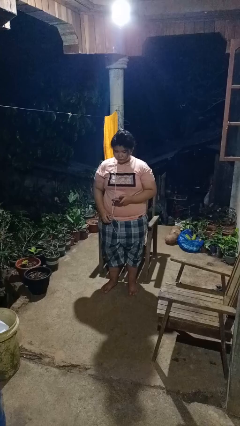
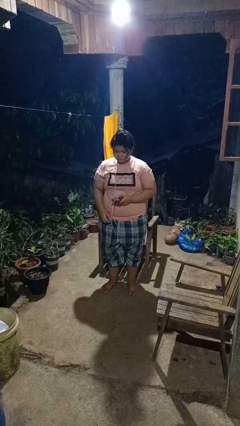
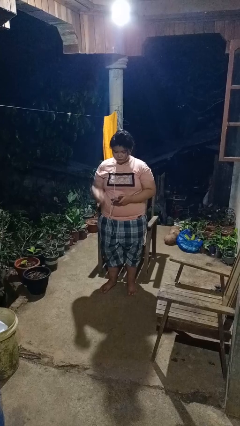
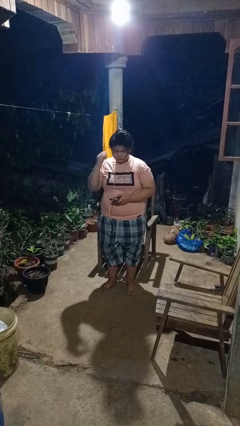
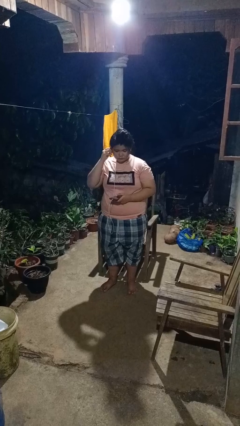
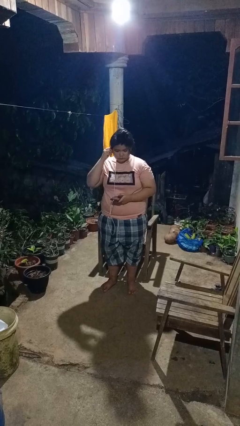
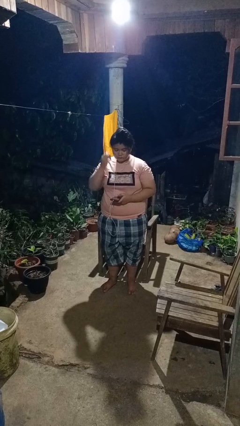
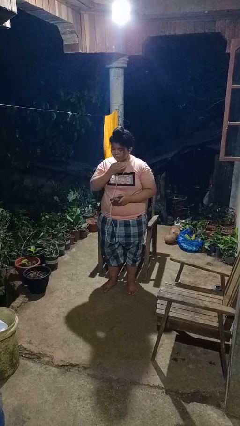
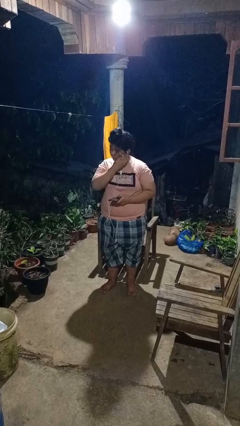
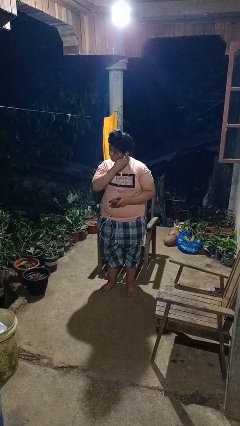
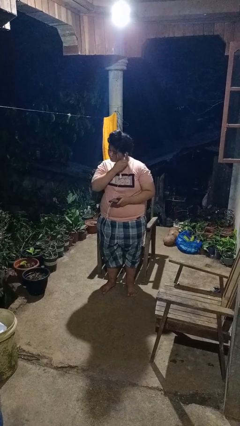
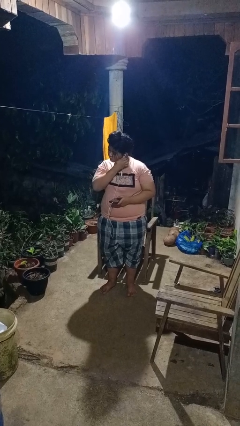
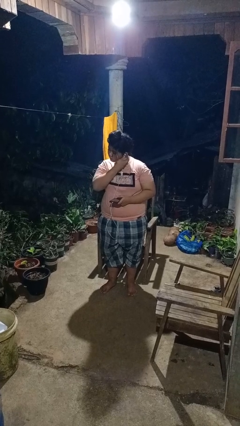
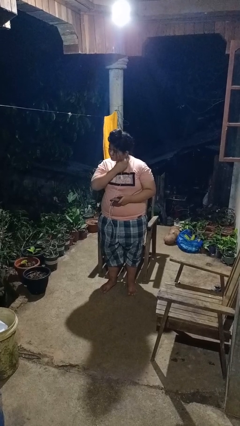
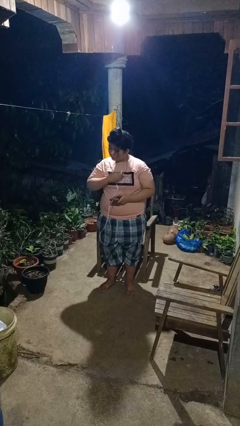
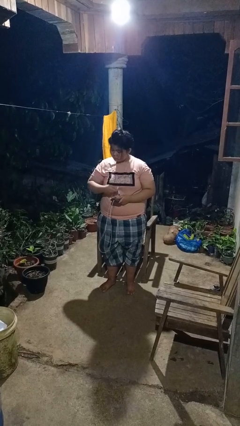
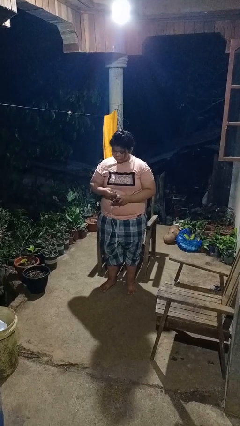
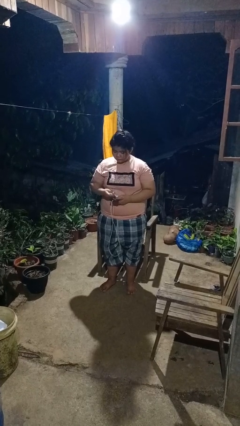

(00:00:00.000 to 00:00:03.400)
person takes off headphones

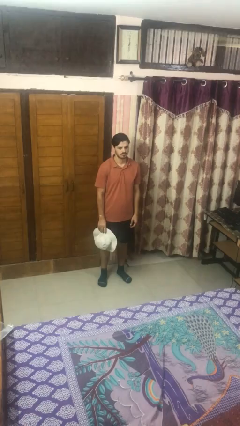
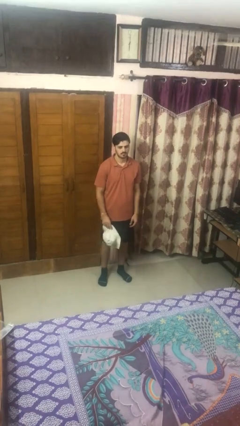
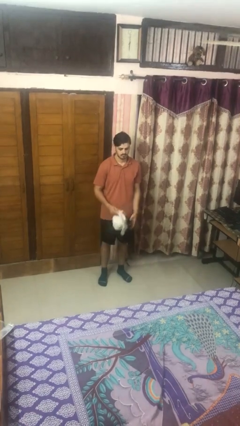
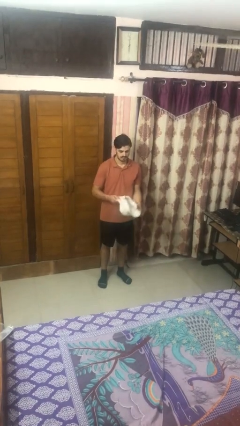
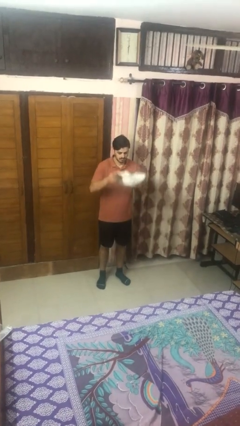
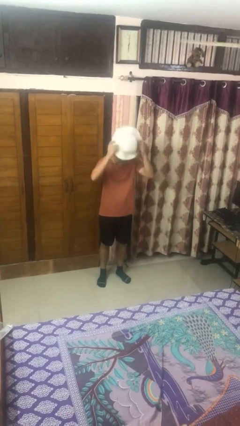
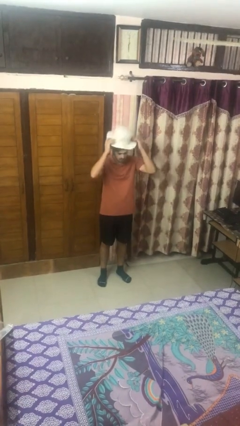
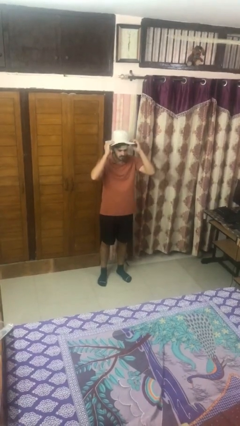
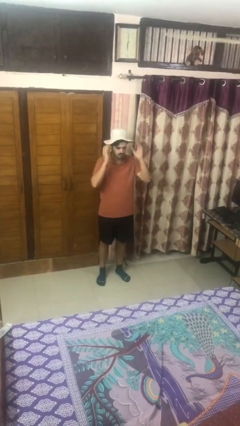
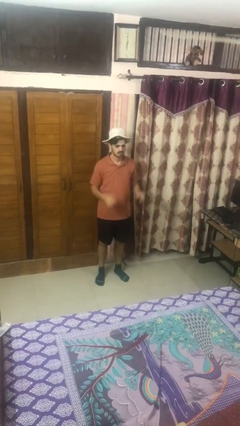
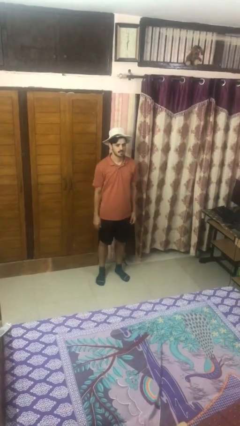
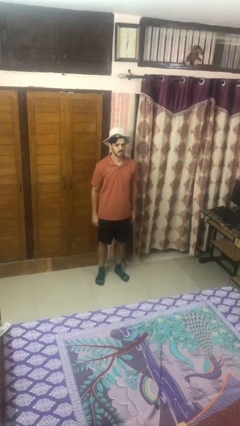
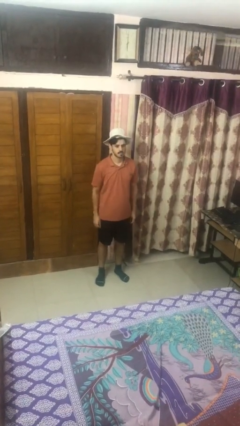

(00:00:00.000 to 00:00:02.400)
person puts on hat

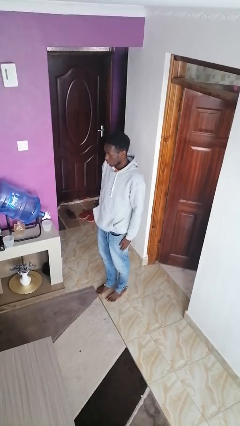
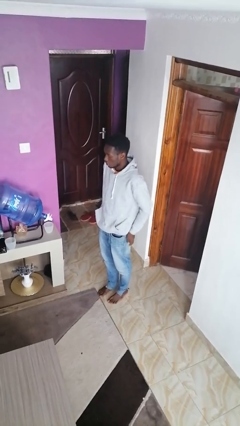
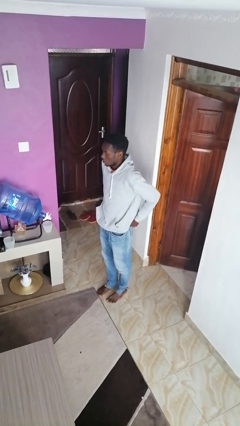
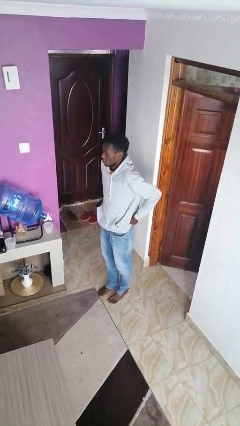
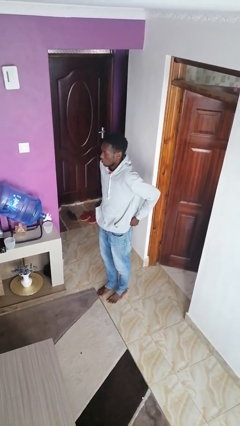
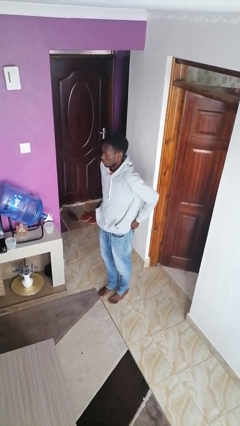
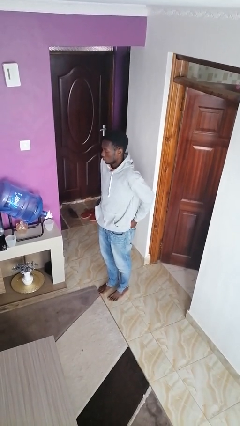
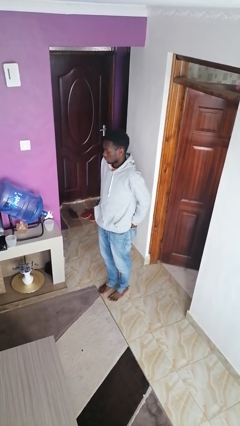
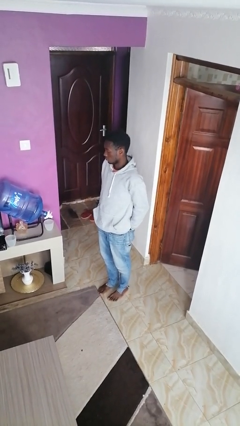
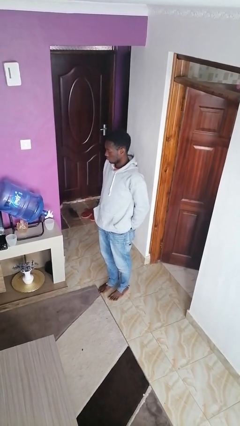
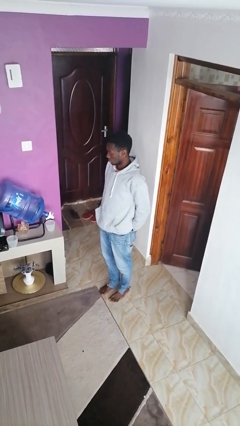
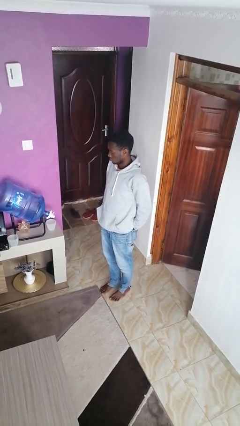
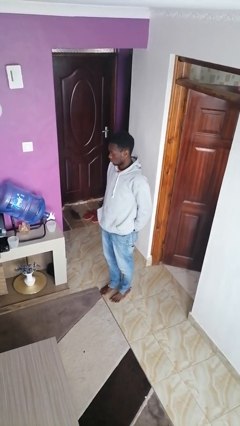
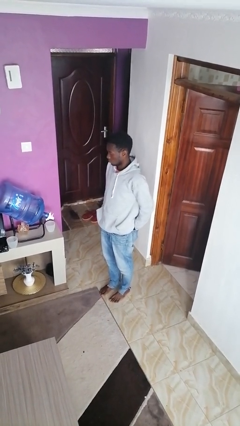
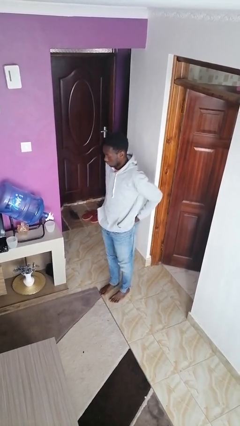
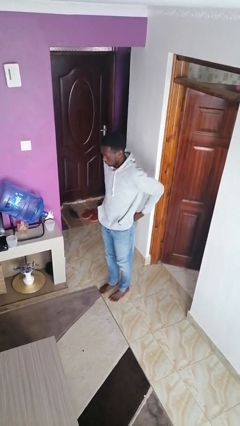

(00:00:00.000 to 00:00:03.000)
person puts hands in back pockets
